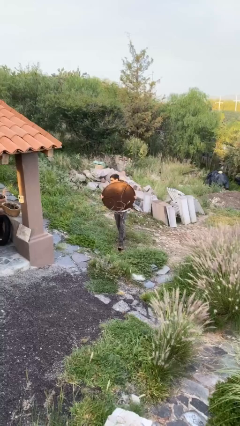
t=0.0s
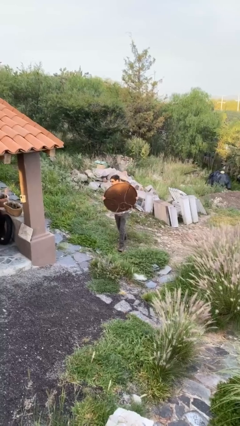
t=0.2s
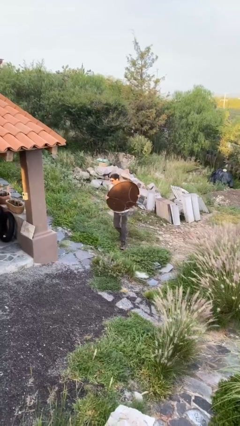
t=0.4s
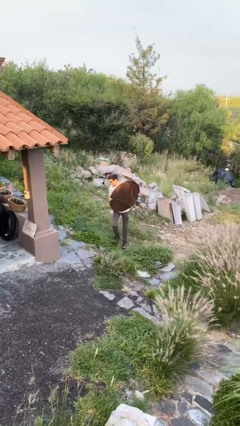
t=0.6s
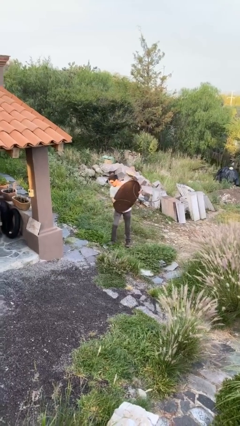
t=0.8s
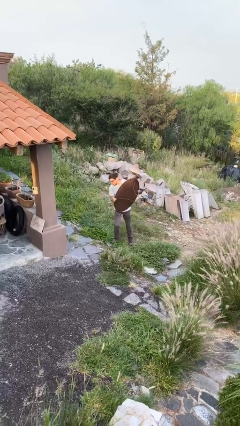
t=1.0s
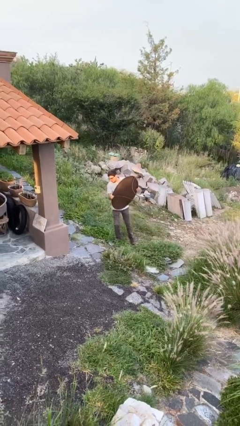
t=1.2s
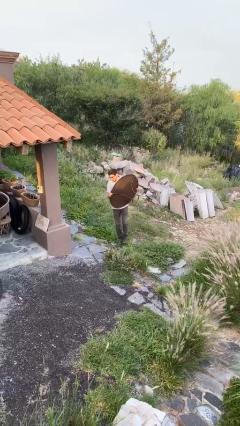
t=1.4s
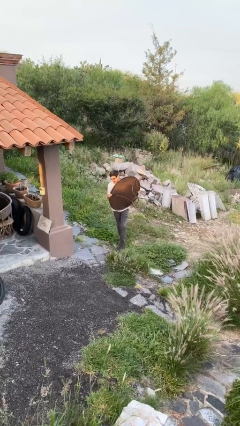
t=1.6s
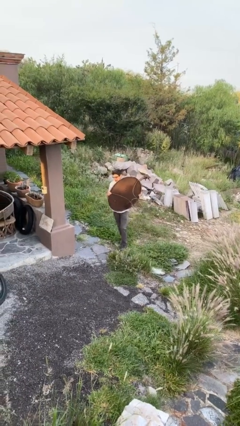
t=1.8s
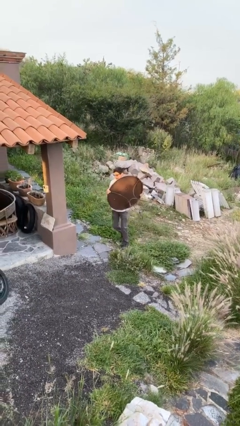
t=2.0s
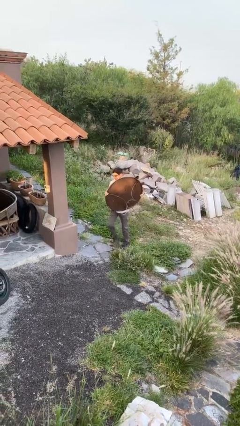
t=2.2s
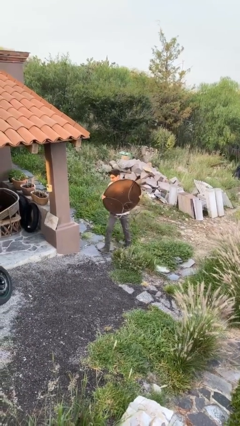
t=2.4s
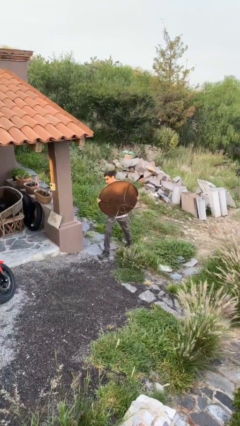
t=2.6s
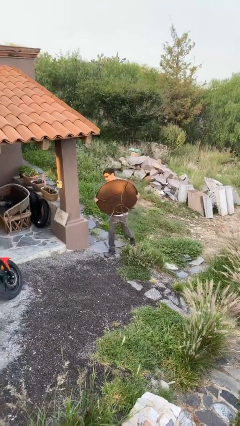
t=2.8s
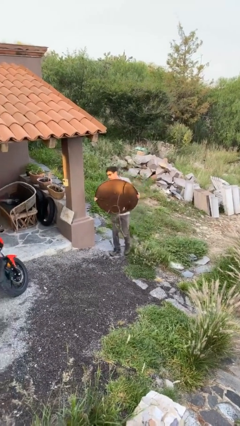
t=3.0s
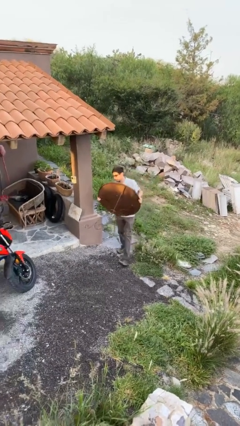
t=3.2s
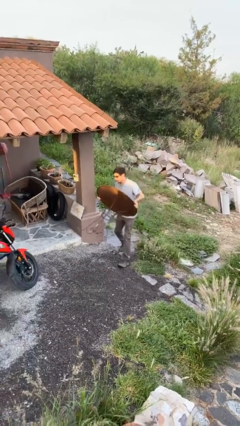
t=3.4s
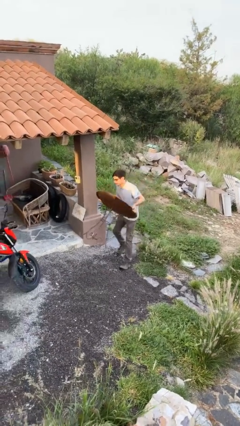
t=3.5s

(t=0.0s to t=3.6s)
person carries heavy object

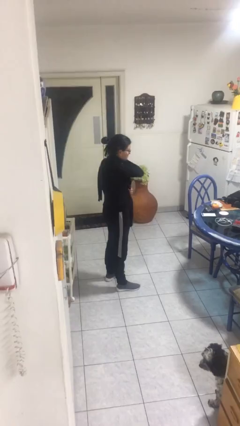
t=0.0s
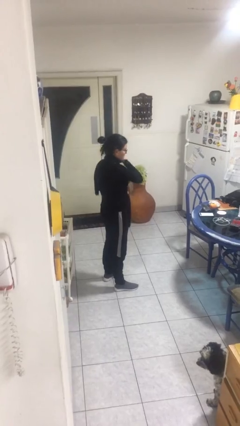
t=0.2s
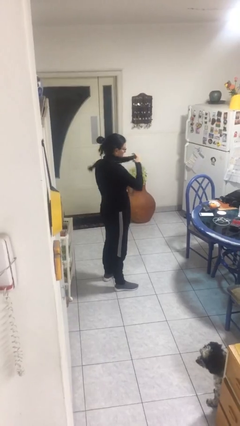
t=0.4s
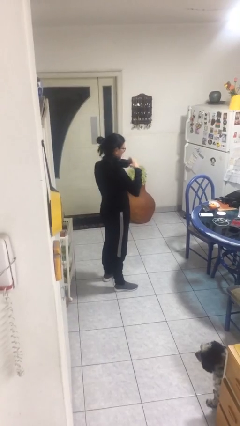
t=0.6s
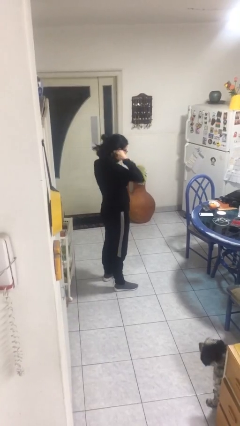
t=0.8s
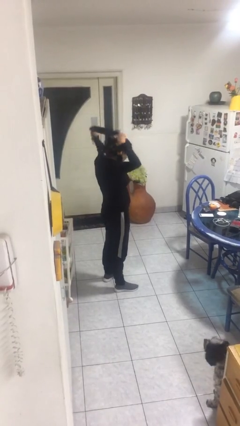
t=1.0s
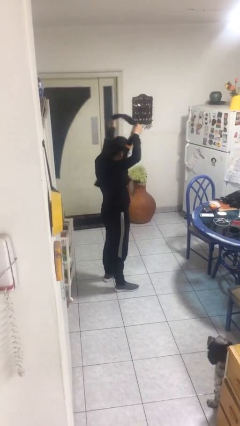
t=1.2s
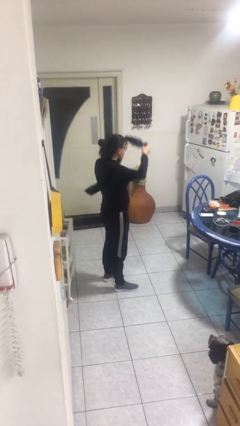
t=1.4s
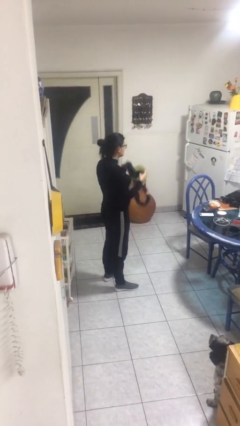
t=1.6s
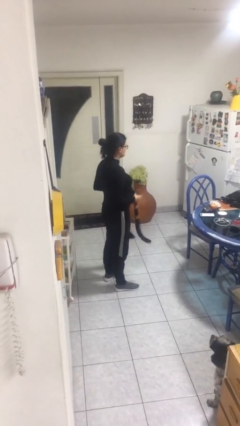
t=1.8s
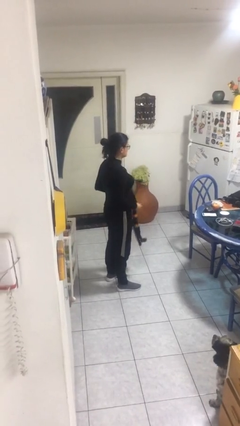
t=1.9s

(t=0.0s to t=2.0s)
person takes off scarf

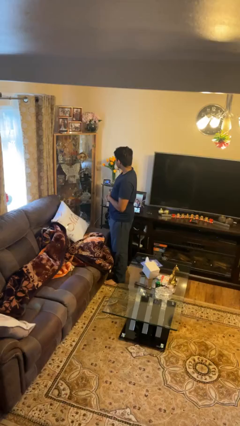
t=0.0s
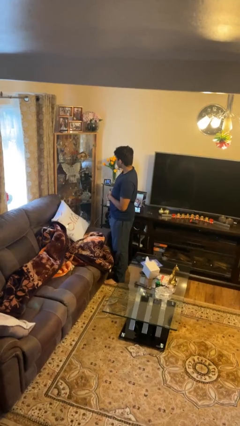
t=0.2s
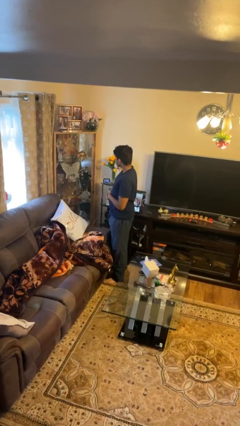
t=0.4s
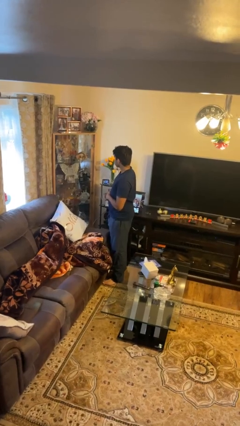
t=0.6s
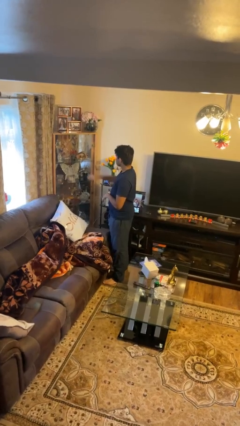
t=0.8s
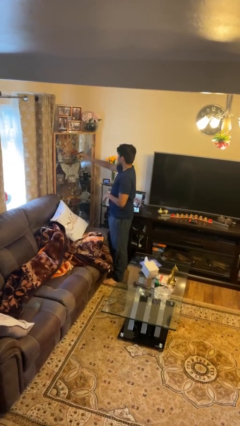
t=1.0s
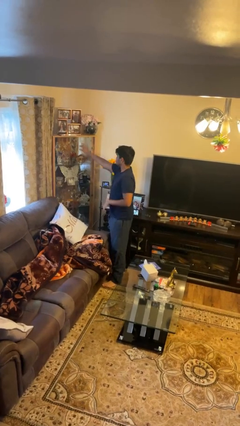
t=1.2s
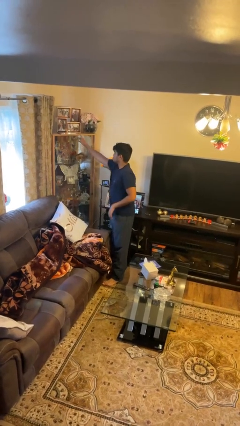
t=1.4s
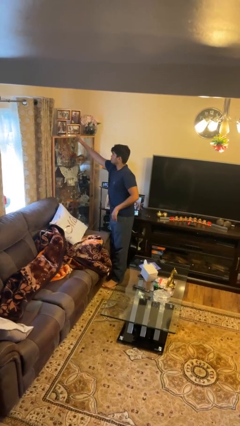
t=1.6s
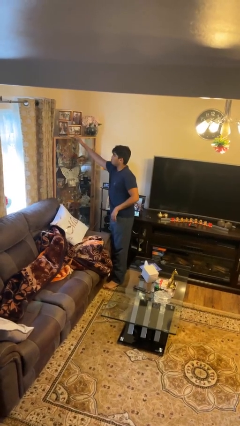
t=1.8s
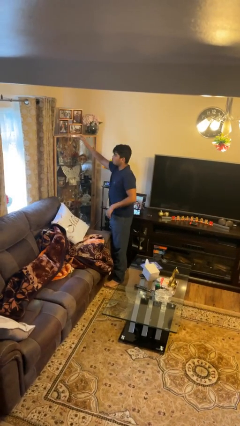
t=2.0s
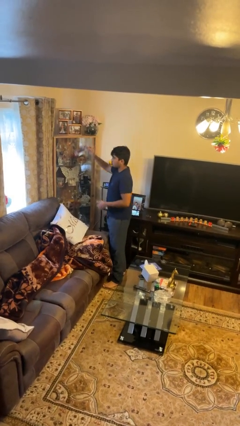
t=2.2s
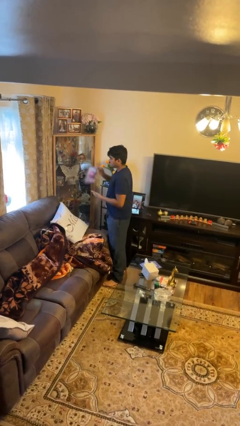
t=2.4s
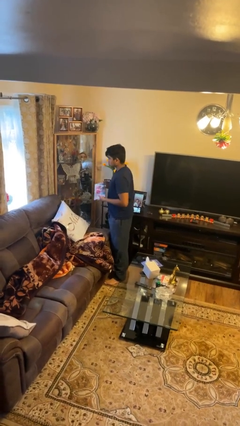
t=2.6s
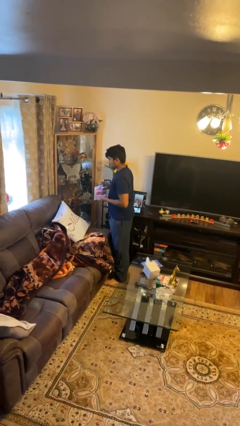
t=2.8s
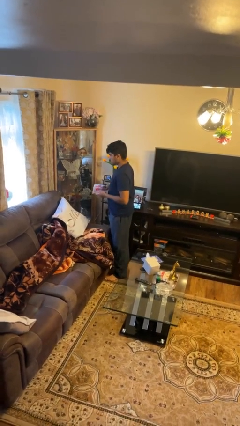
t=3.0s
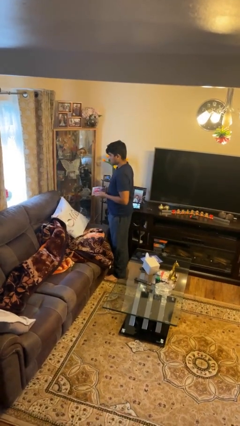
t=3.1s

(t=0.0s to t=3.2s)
person picks up object from shelf

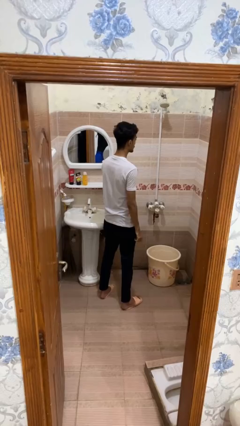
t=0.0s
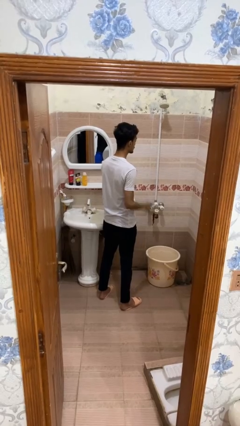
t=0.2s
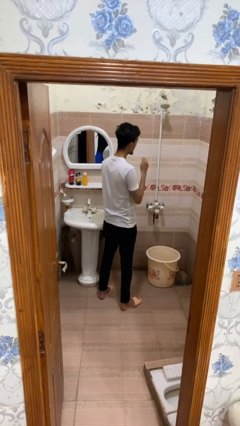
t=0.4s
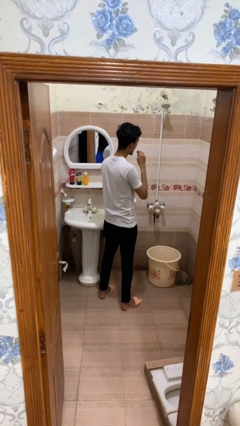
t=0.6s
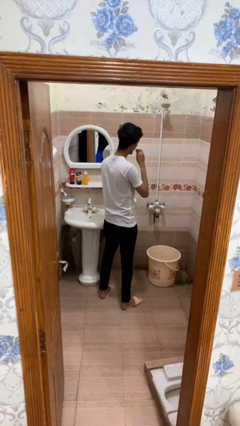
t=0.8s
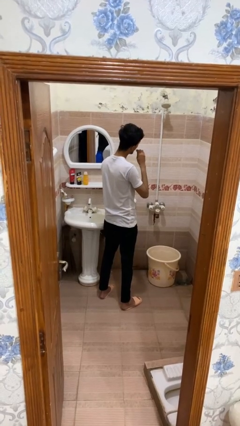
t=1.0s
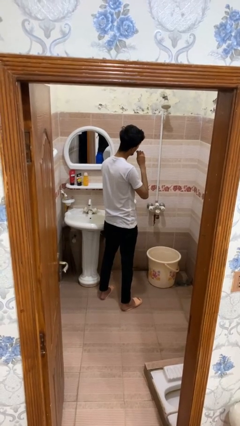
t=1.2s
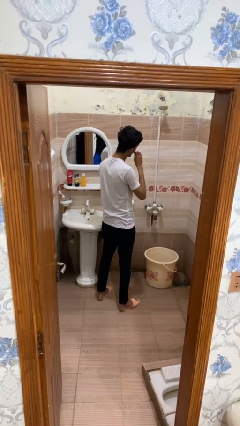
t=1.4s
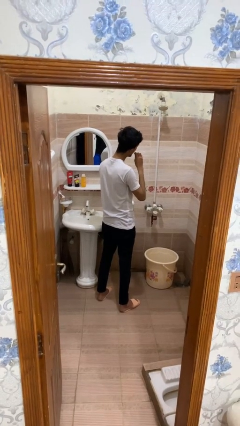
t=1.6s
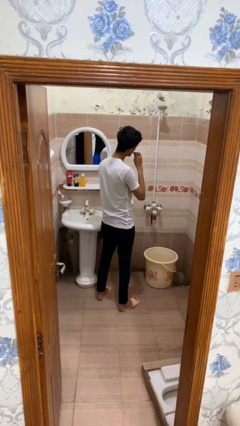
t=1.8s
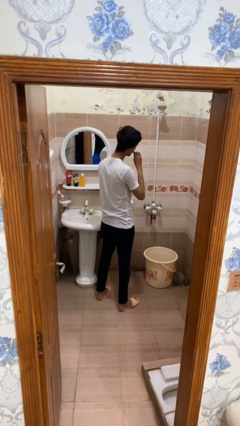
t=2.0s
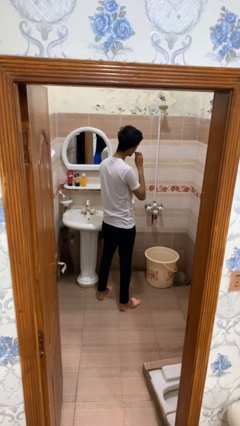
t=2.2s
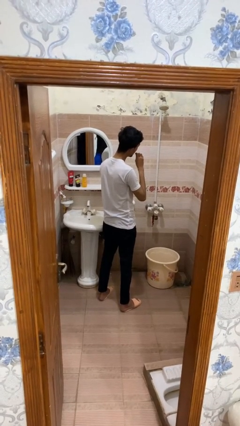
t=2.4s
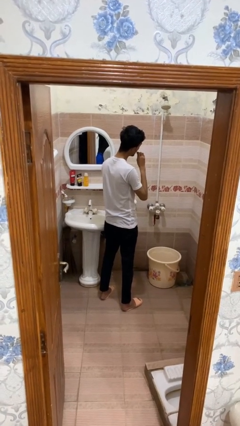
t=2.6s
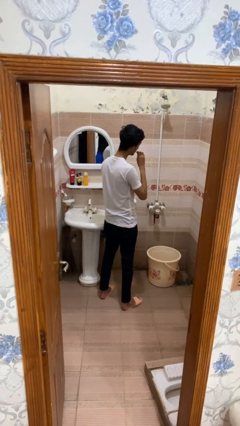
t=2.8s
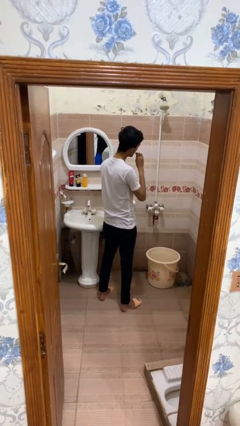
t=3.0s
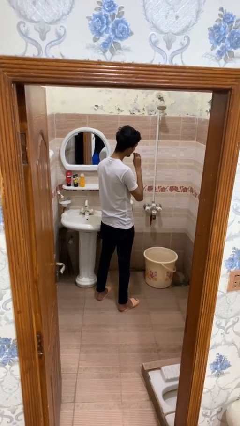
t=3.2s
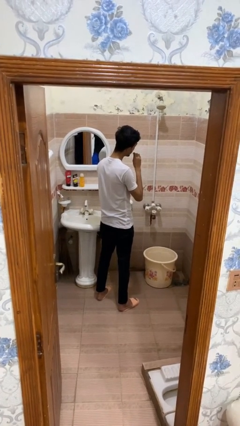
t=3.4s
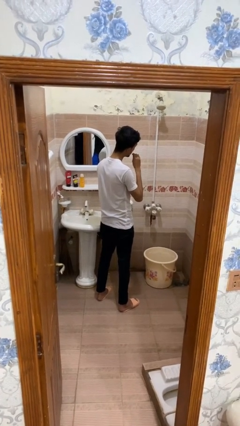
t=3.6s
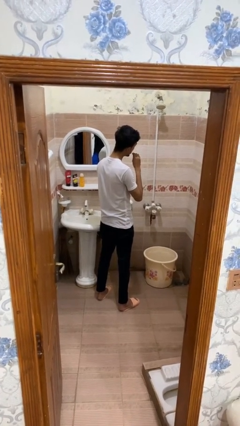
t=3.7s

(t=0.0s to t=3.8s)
person flosses

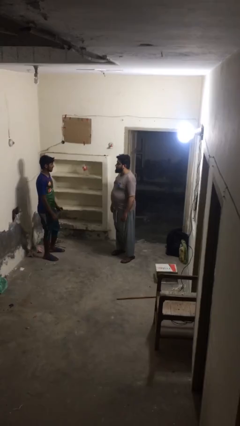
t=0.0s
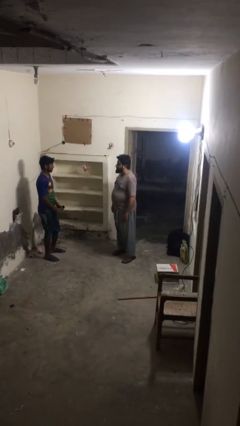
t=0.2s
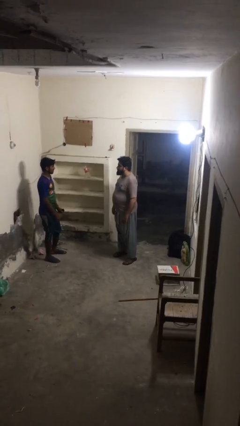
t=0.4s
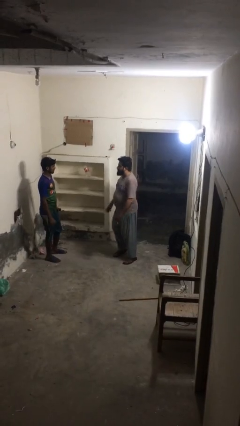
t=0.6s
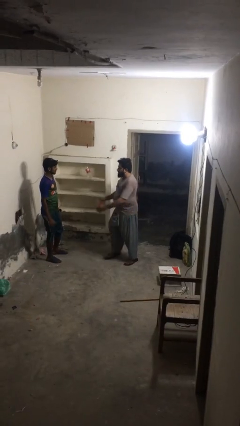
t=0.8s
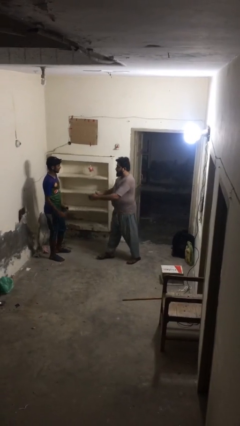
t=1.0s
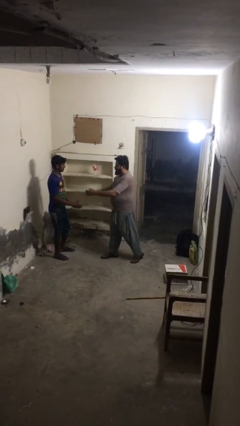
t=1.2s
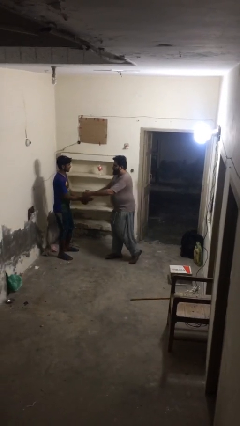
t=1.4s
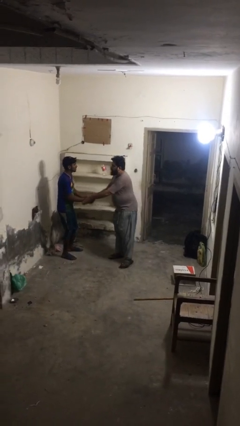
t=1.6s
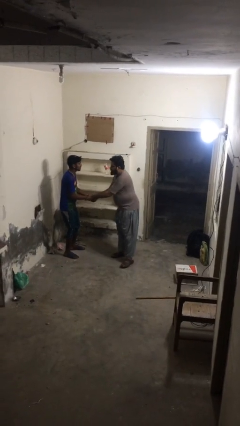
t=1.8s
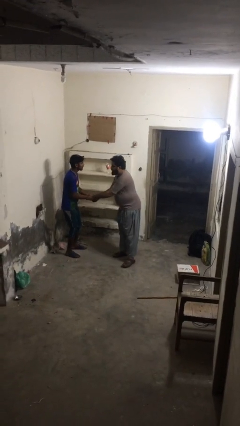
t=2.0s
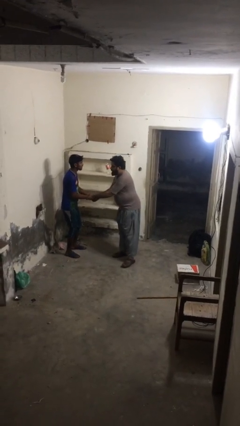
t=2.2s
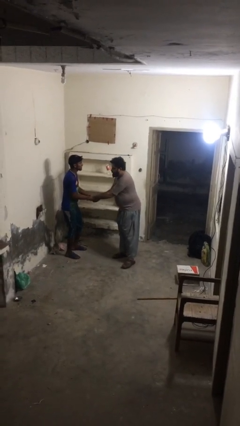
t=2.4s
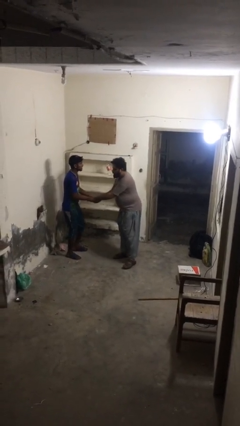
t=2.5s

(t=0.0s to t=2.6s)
person shakes hand

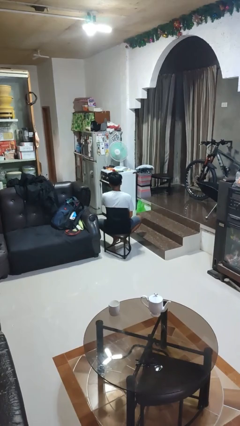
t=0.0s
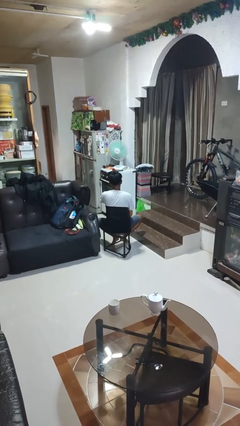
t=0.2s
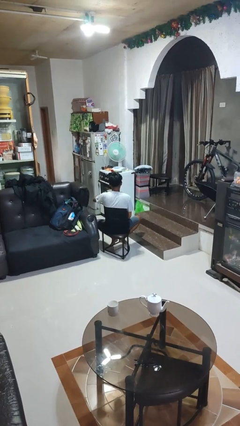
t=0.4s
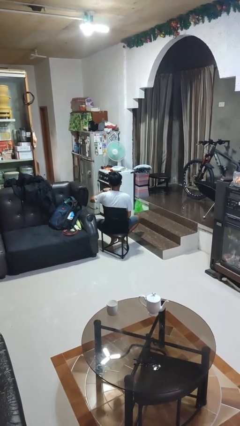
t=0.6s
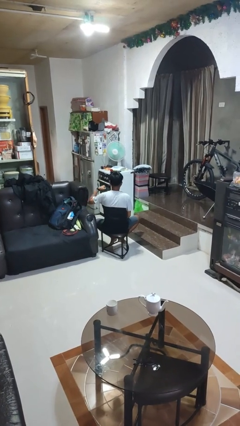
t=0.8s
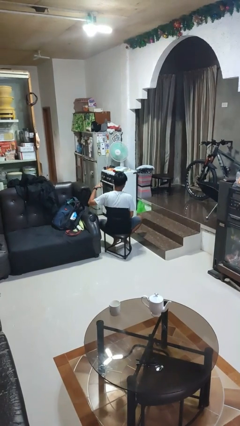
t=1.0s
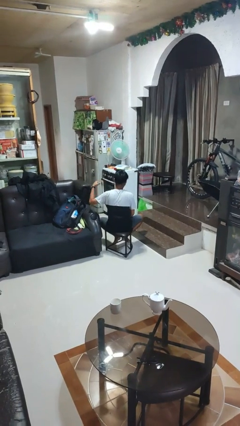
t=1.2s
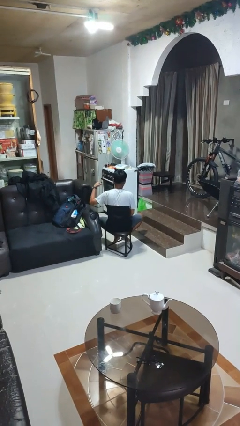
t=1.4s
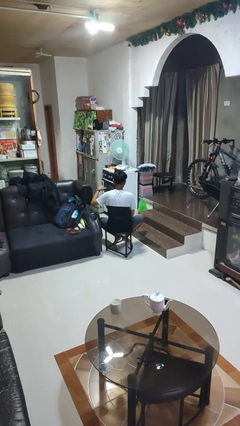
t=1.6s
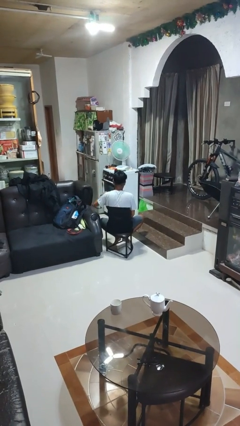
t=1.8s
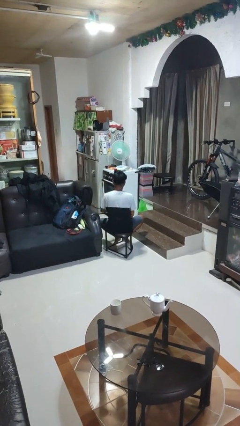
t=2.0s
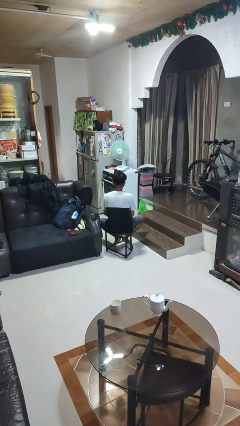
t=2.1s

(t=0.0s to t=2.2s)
person gestures cut

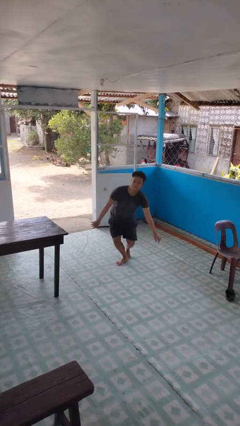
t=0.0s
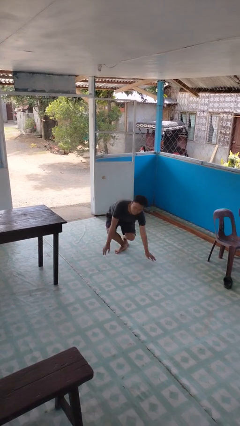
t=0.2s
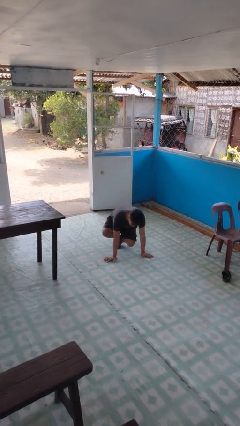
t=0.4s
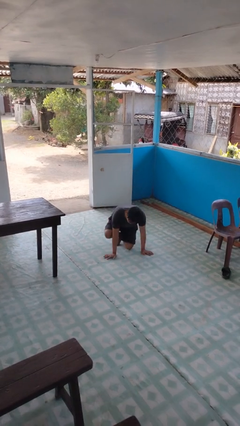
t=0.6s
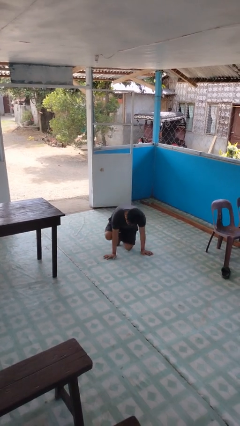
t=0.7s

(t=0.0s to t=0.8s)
person falls while standing
